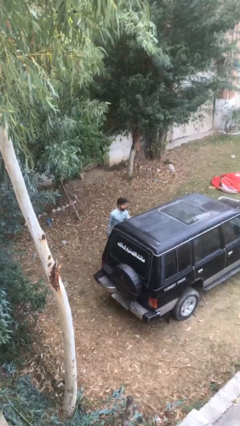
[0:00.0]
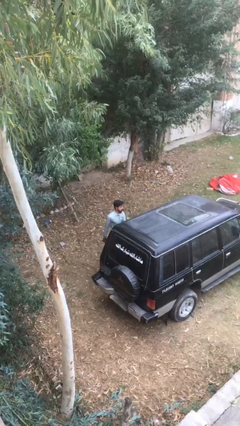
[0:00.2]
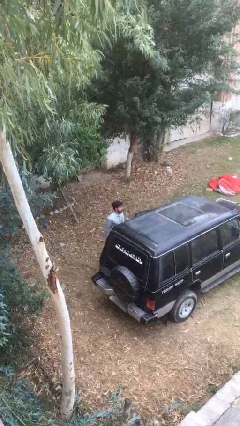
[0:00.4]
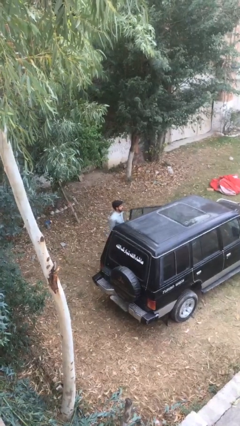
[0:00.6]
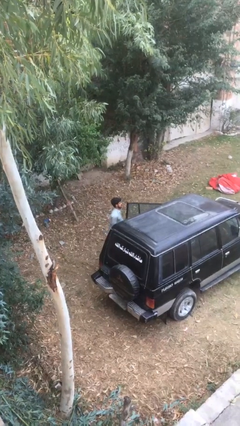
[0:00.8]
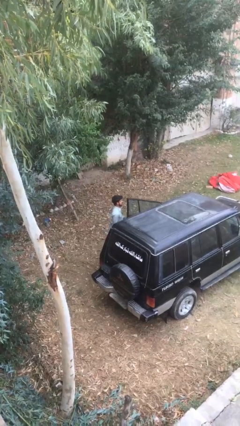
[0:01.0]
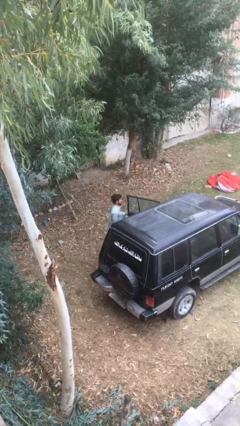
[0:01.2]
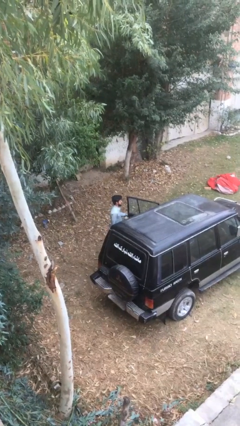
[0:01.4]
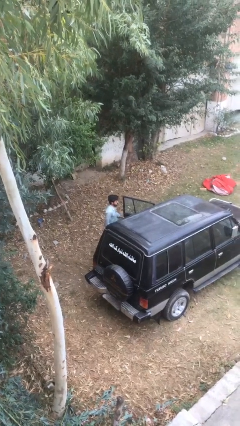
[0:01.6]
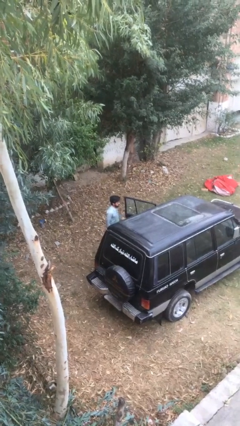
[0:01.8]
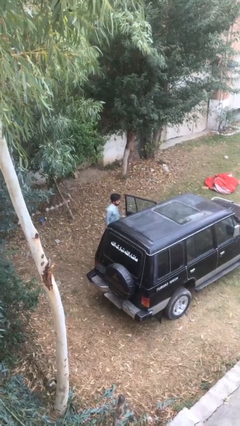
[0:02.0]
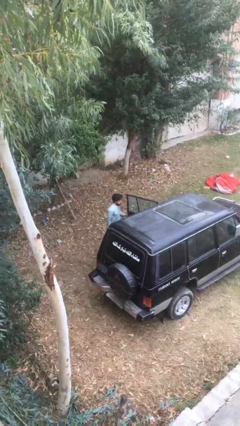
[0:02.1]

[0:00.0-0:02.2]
person opens car door

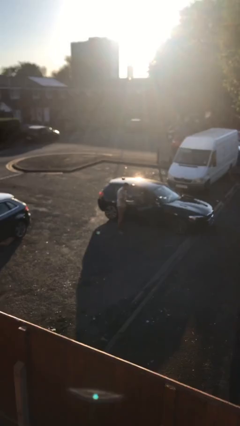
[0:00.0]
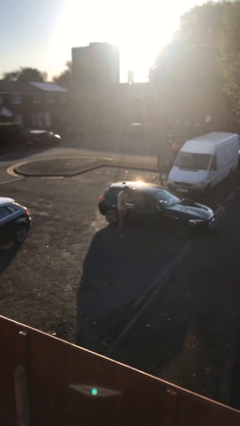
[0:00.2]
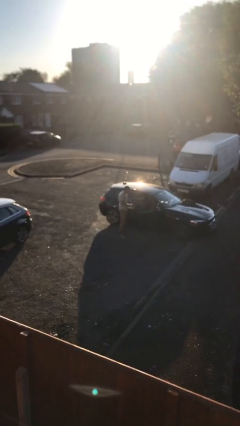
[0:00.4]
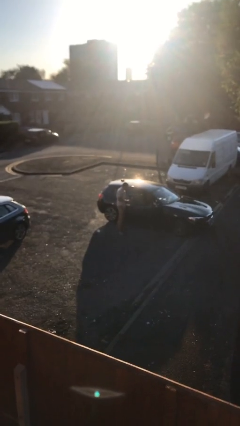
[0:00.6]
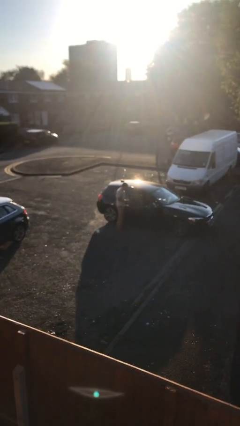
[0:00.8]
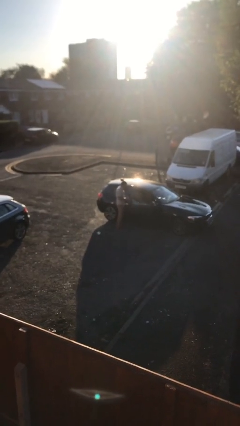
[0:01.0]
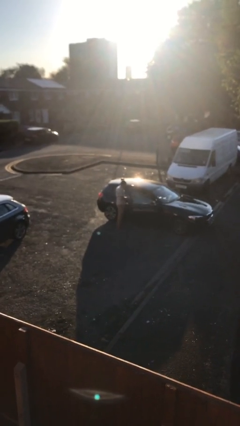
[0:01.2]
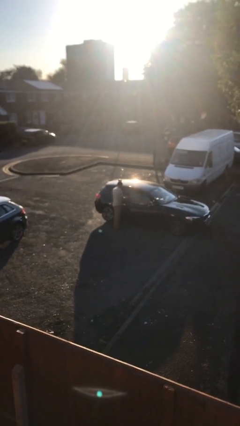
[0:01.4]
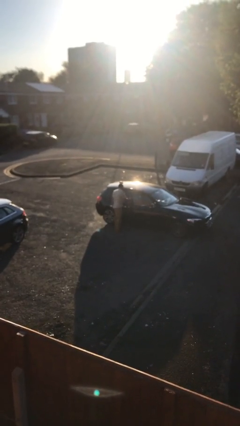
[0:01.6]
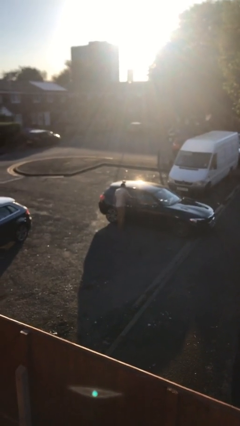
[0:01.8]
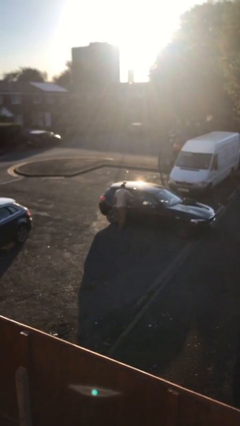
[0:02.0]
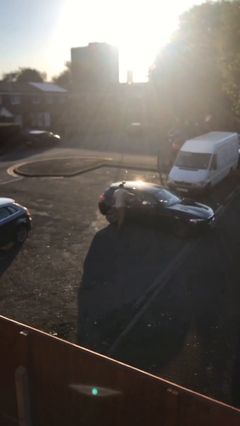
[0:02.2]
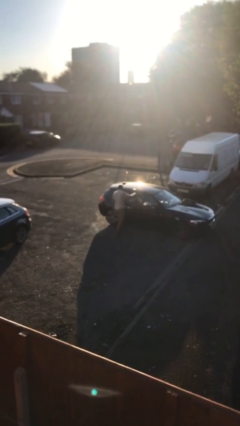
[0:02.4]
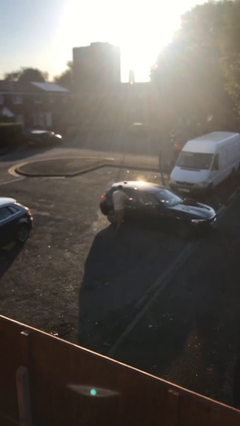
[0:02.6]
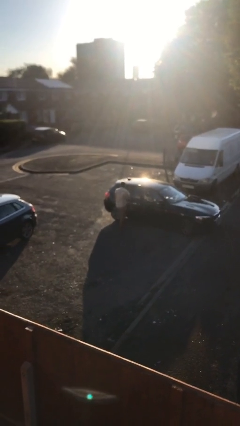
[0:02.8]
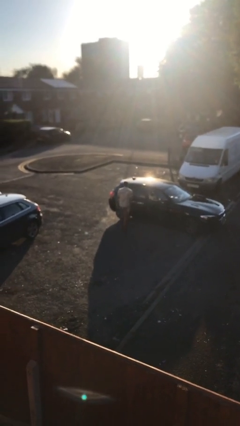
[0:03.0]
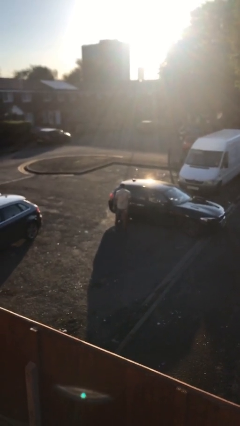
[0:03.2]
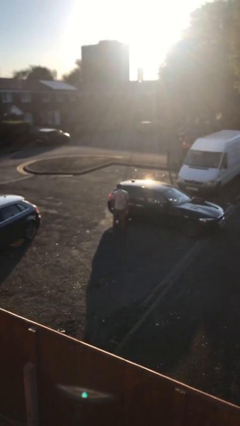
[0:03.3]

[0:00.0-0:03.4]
person closes car door

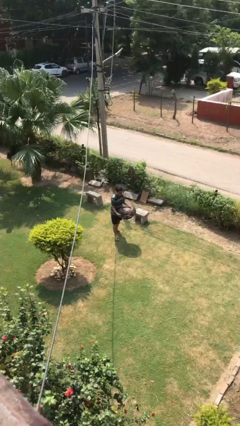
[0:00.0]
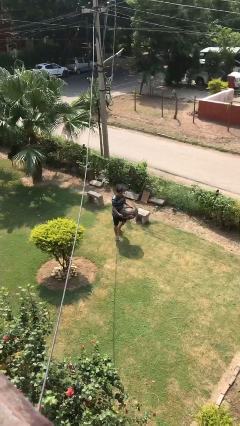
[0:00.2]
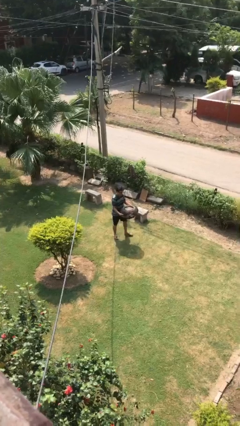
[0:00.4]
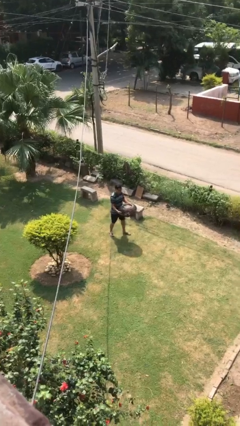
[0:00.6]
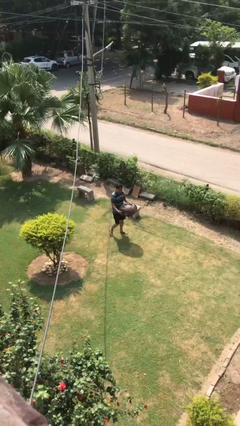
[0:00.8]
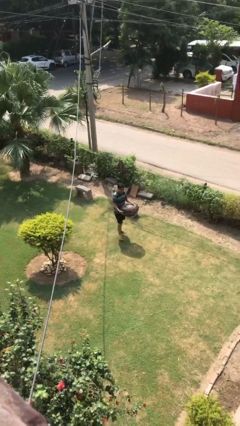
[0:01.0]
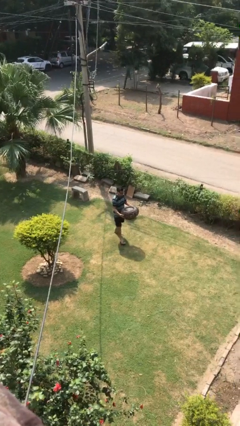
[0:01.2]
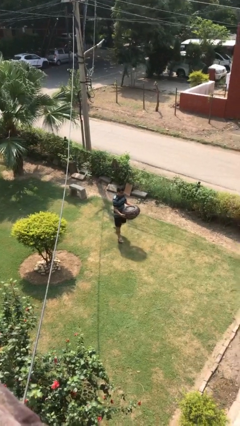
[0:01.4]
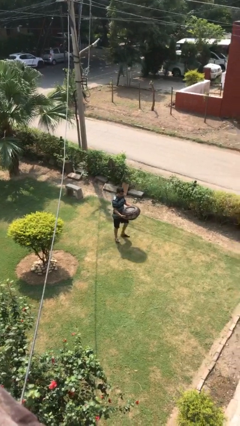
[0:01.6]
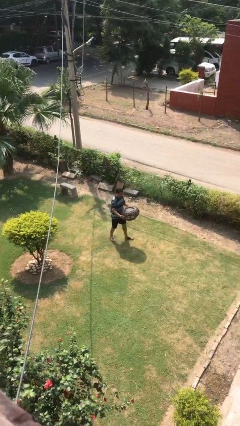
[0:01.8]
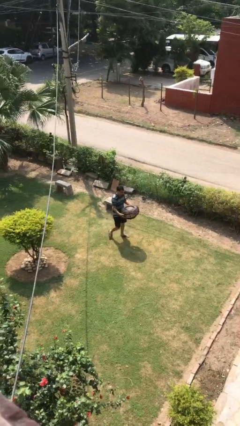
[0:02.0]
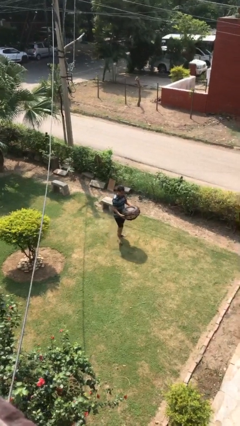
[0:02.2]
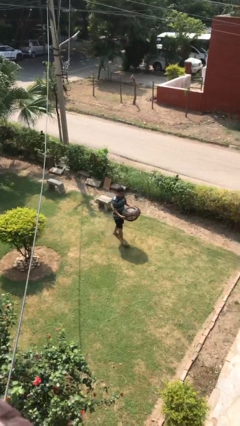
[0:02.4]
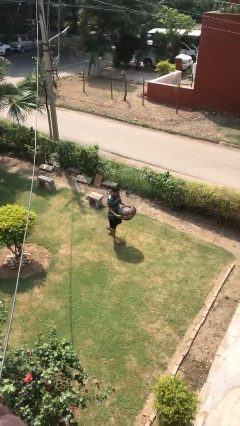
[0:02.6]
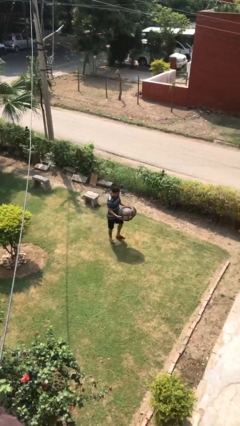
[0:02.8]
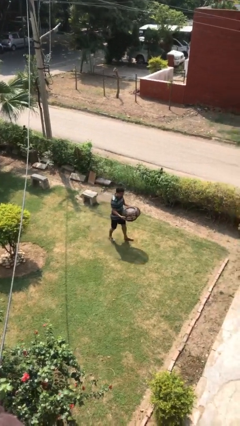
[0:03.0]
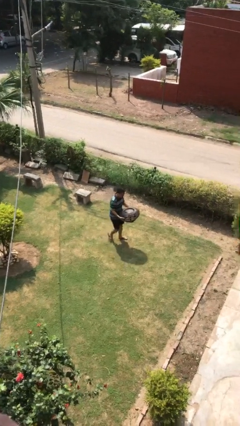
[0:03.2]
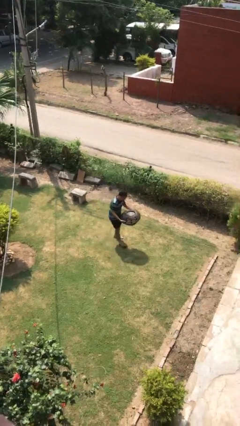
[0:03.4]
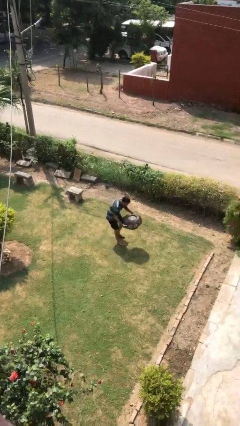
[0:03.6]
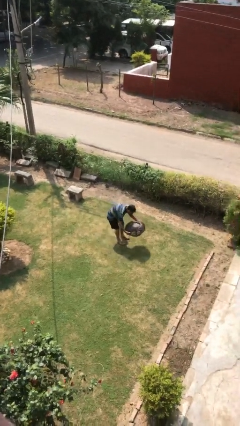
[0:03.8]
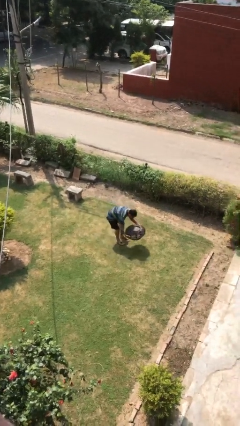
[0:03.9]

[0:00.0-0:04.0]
person carries heavy object

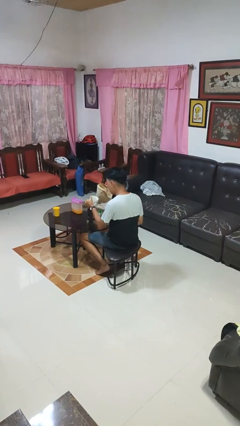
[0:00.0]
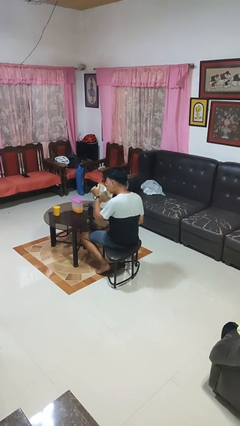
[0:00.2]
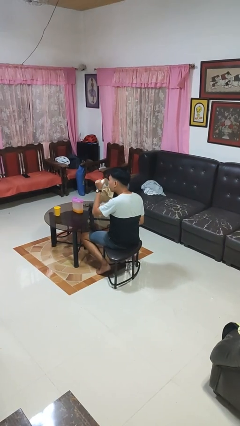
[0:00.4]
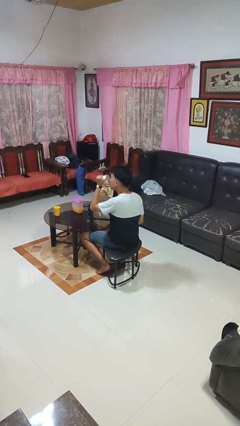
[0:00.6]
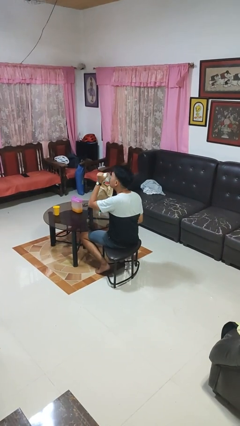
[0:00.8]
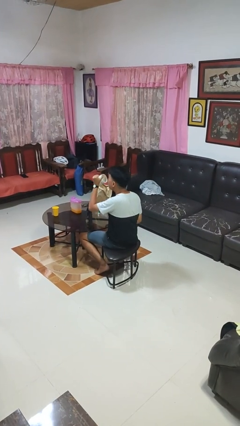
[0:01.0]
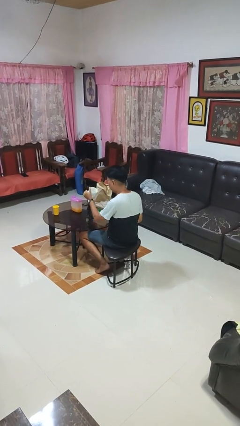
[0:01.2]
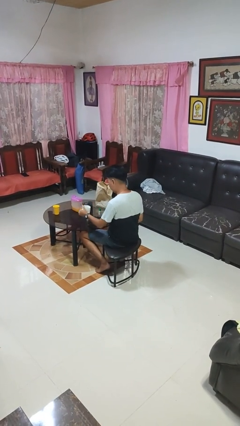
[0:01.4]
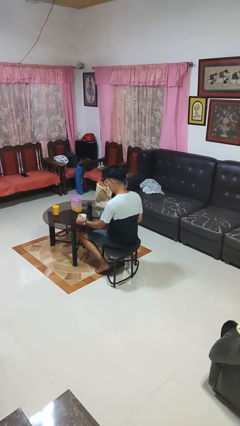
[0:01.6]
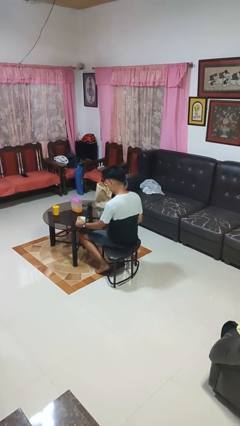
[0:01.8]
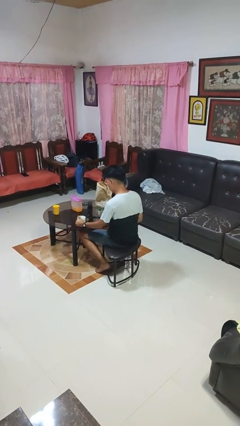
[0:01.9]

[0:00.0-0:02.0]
person drinks from mug

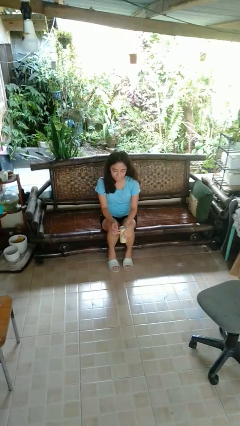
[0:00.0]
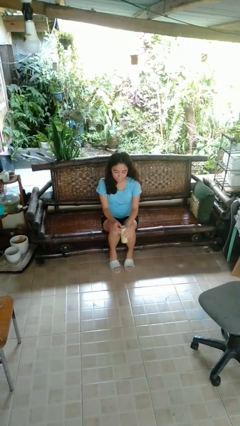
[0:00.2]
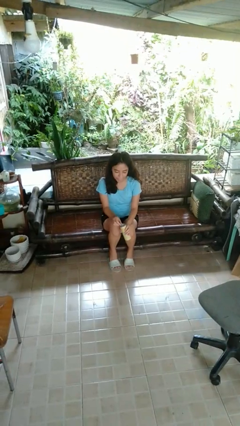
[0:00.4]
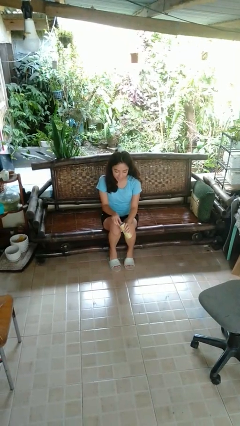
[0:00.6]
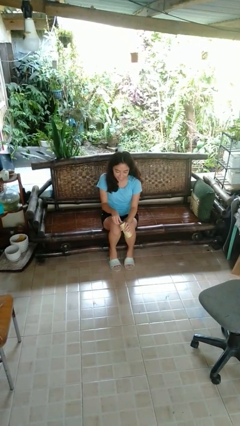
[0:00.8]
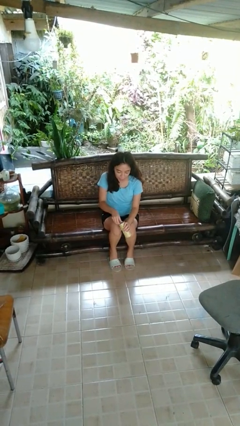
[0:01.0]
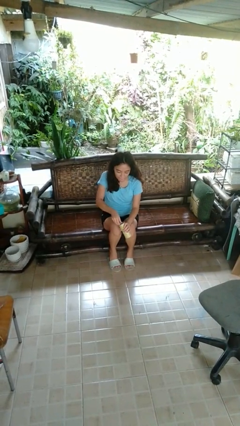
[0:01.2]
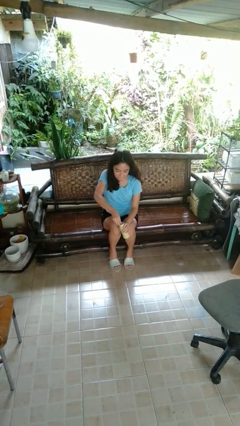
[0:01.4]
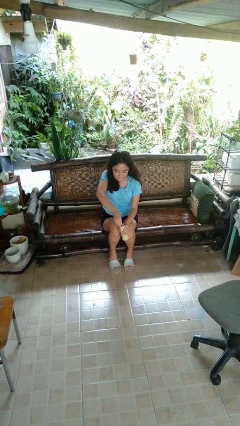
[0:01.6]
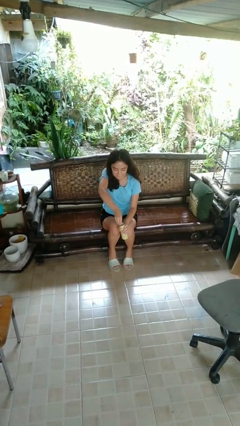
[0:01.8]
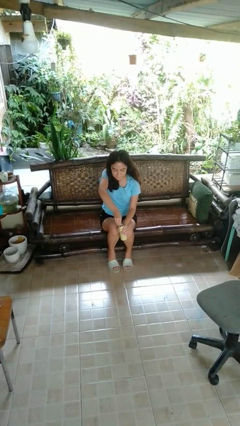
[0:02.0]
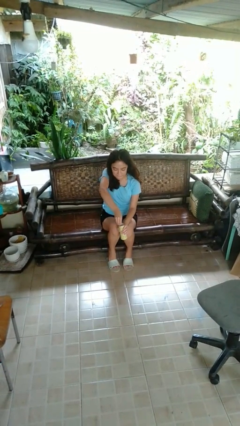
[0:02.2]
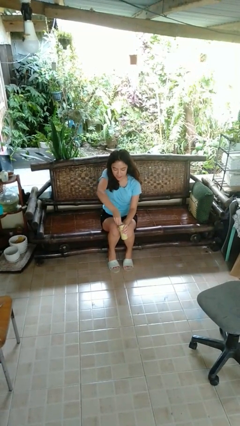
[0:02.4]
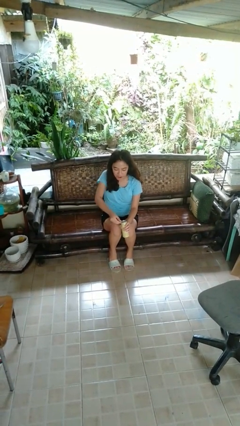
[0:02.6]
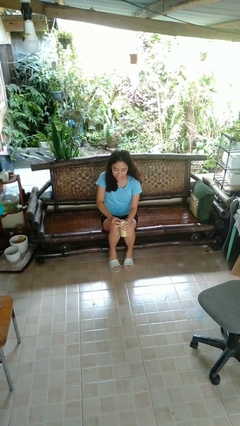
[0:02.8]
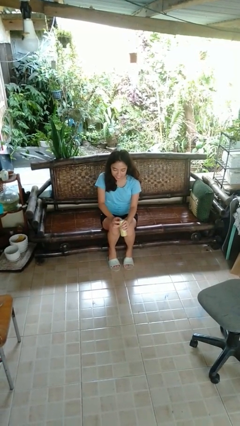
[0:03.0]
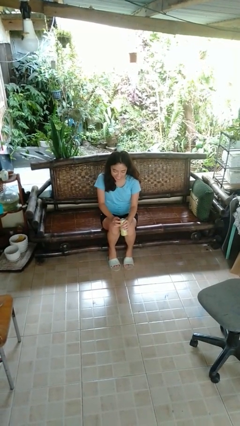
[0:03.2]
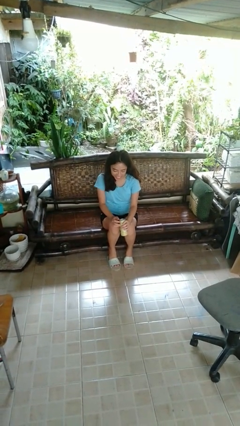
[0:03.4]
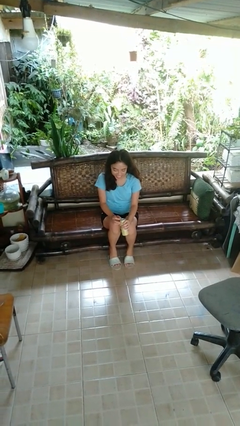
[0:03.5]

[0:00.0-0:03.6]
person opens beverage can

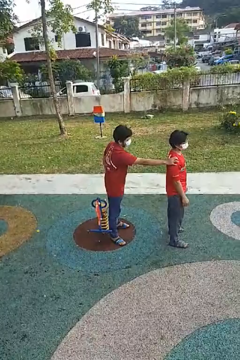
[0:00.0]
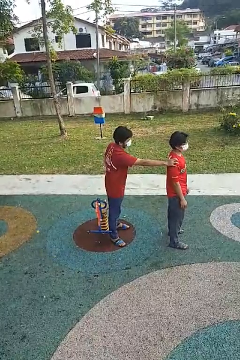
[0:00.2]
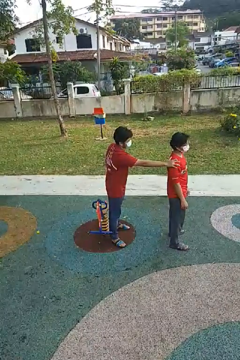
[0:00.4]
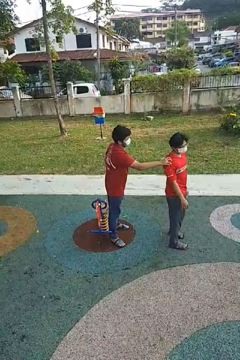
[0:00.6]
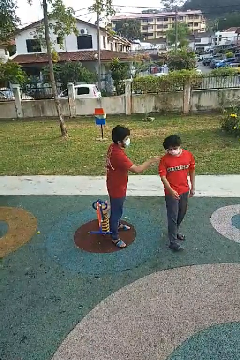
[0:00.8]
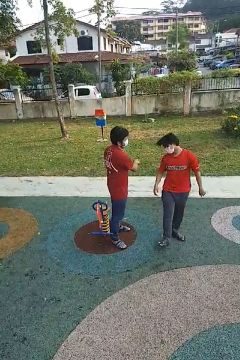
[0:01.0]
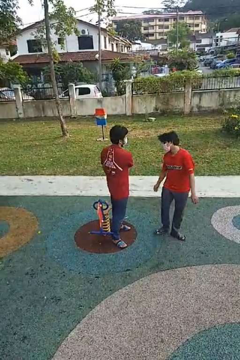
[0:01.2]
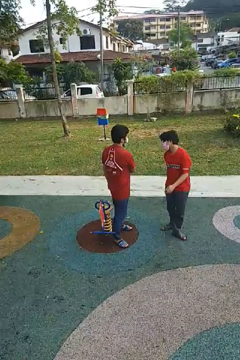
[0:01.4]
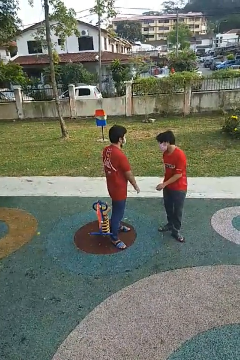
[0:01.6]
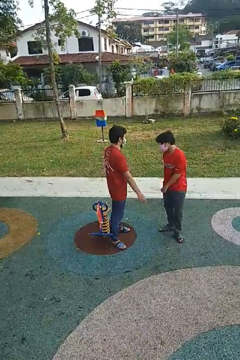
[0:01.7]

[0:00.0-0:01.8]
person spins person around

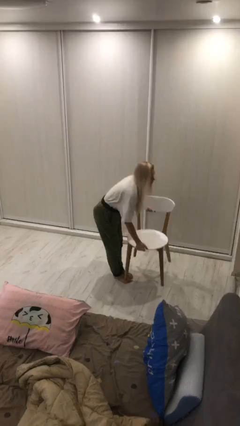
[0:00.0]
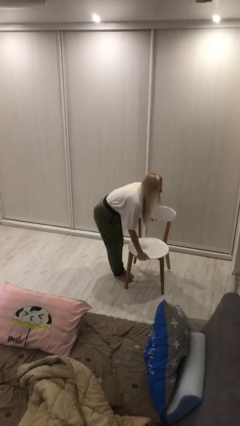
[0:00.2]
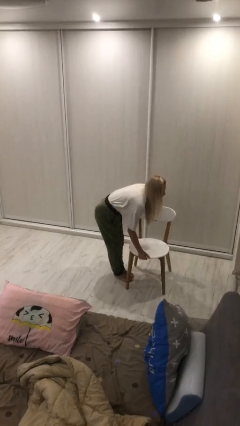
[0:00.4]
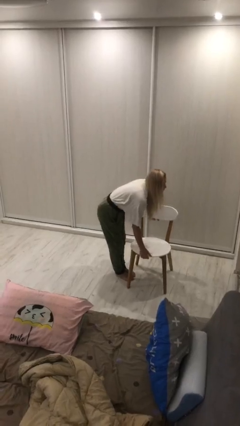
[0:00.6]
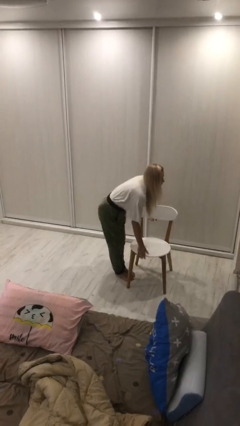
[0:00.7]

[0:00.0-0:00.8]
person puts down object on floor
